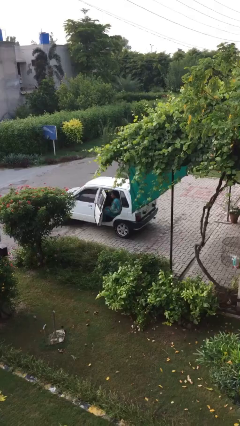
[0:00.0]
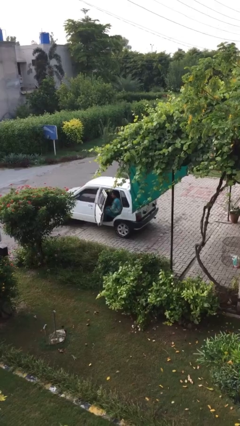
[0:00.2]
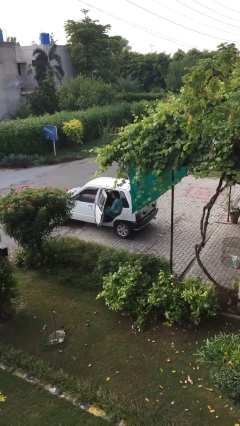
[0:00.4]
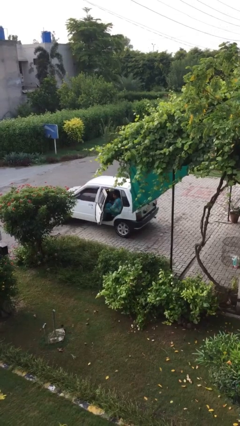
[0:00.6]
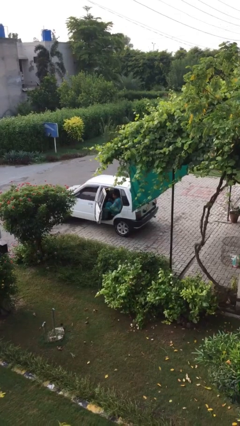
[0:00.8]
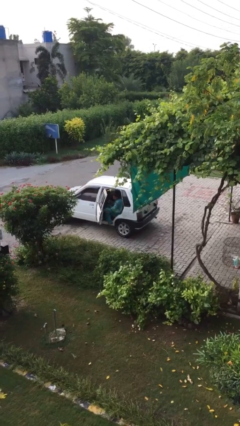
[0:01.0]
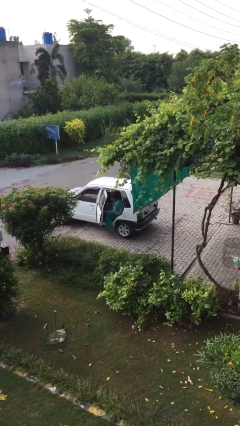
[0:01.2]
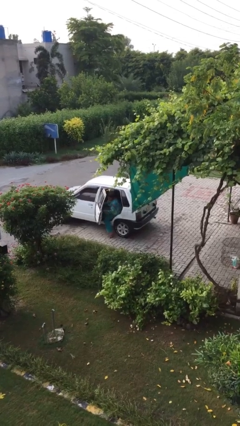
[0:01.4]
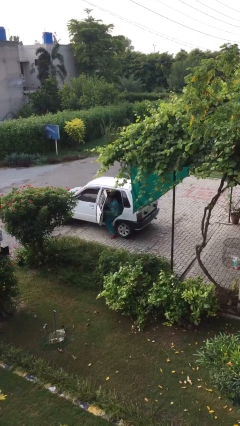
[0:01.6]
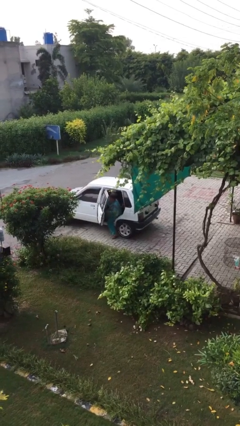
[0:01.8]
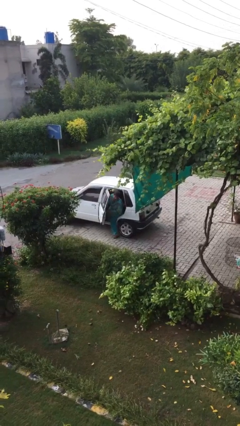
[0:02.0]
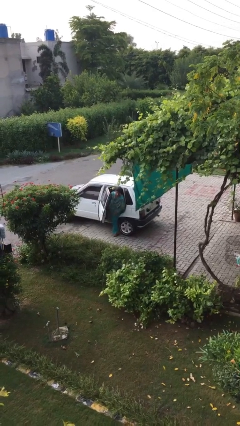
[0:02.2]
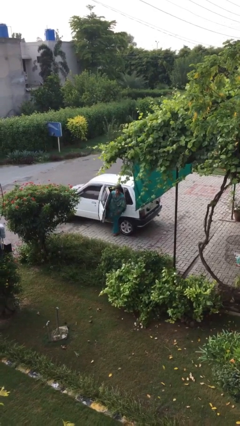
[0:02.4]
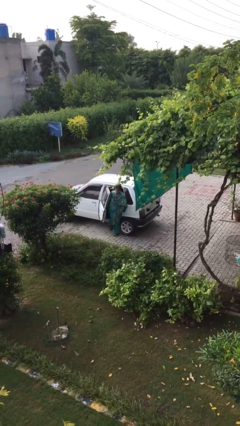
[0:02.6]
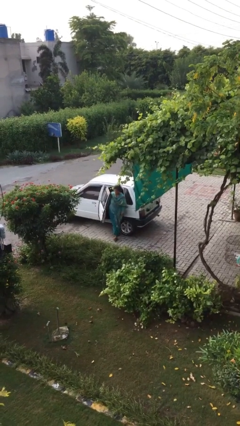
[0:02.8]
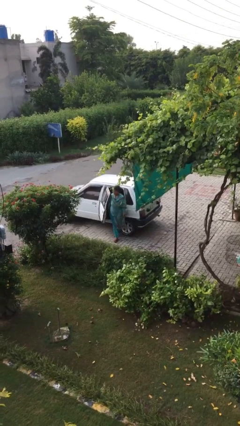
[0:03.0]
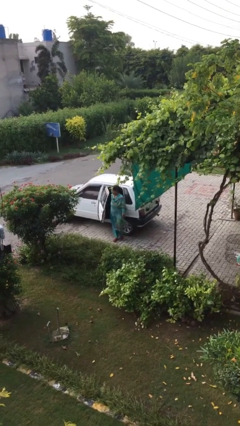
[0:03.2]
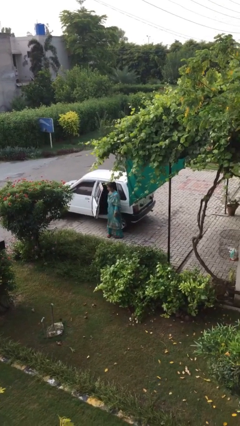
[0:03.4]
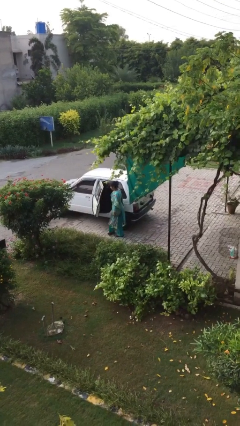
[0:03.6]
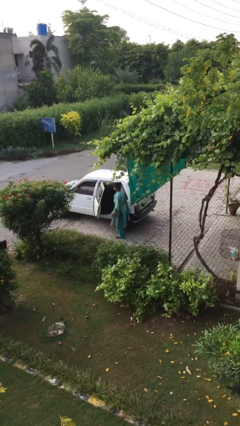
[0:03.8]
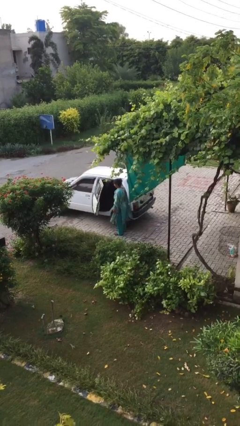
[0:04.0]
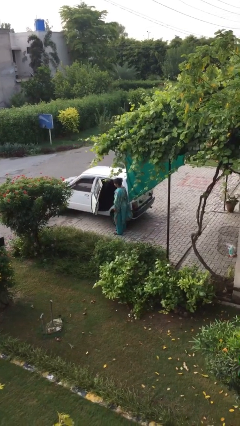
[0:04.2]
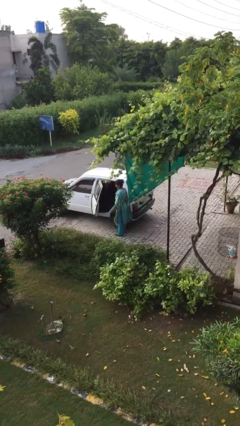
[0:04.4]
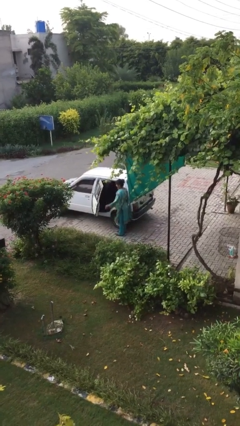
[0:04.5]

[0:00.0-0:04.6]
person exits car

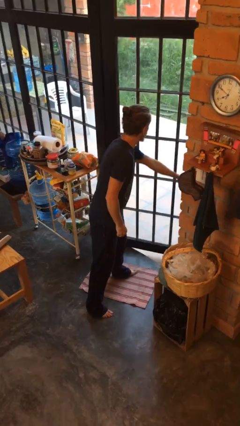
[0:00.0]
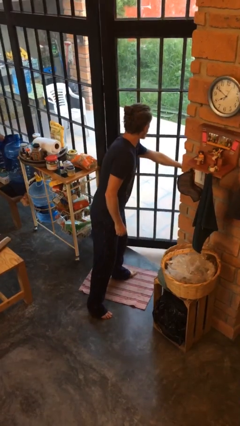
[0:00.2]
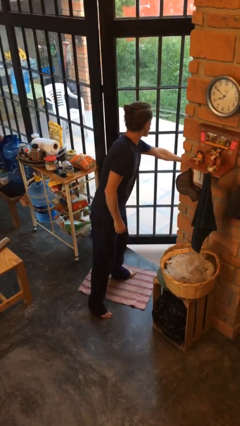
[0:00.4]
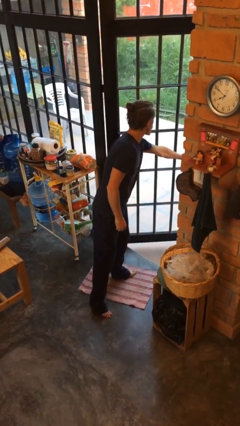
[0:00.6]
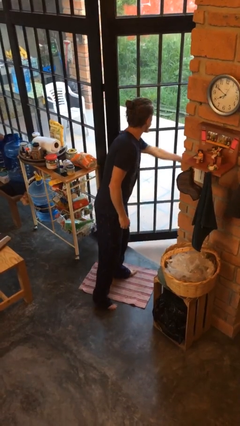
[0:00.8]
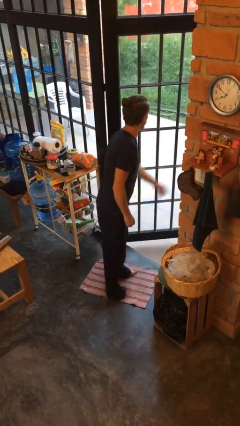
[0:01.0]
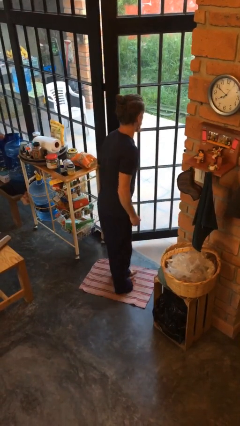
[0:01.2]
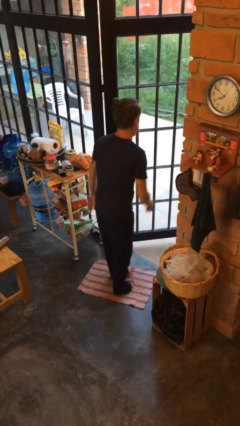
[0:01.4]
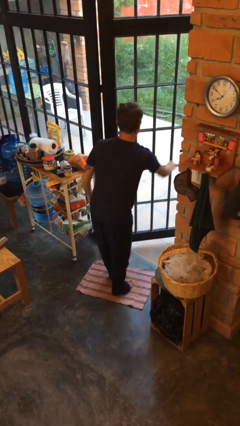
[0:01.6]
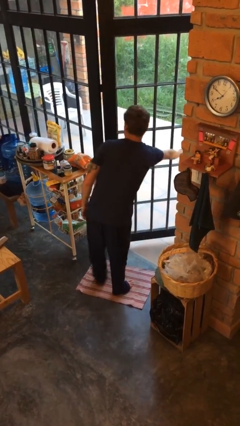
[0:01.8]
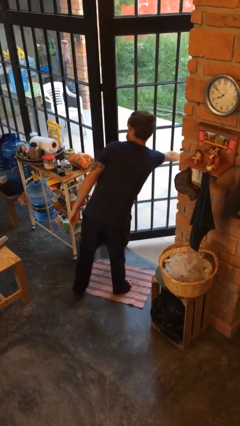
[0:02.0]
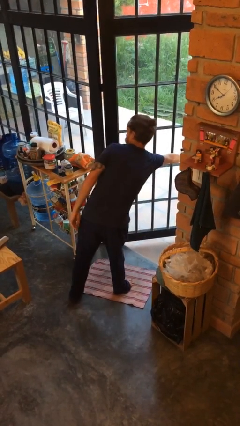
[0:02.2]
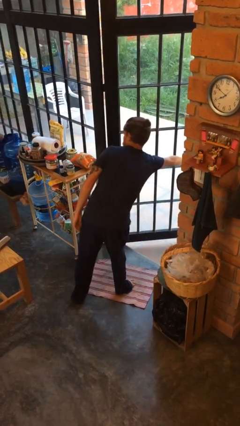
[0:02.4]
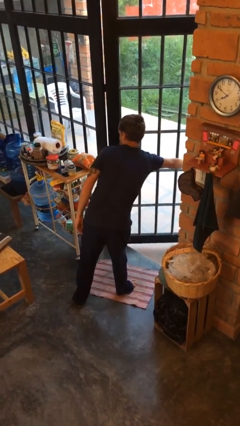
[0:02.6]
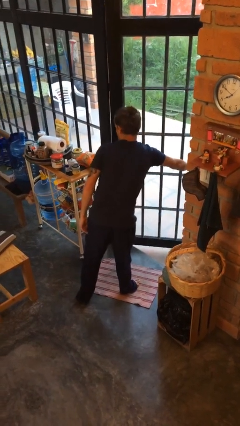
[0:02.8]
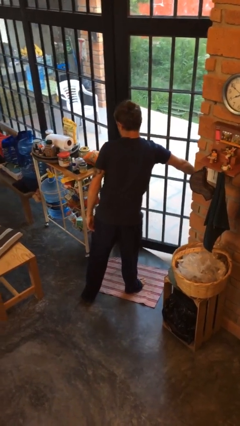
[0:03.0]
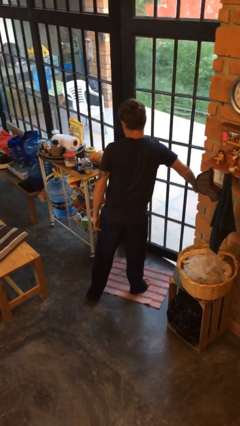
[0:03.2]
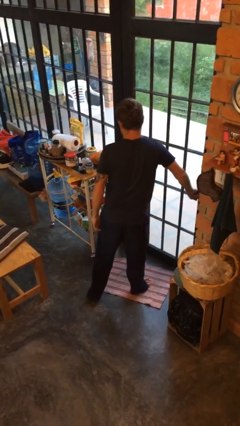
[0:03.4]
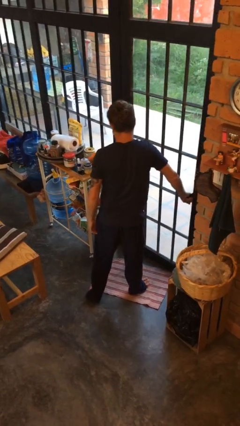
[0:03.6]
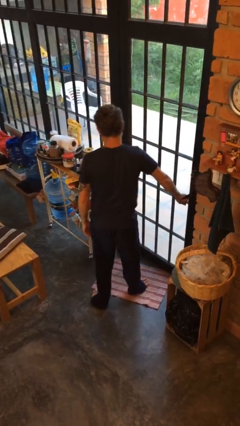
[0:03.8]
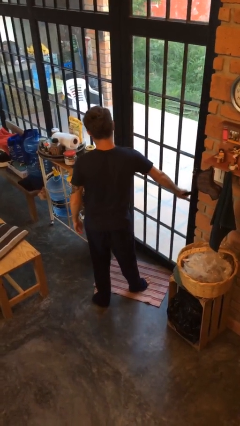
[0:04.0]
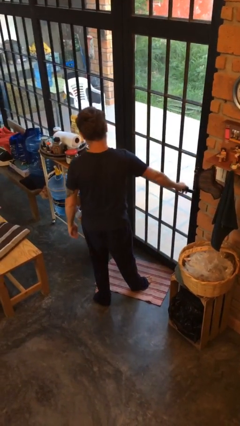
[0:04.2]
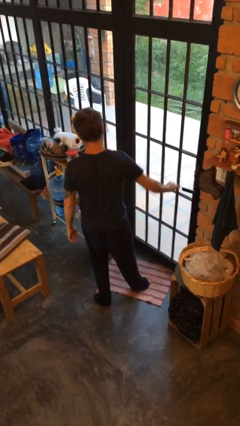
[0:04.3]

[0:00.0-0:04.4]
person closes facility door

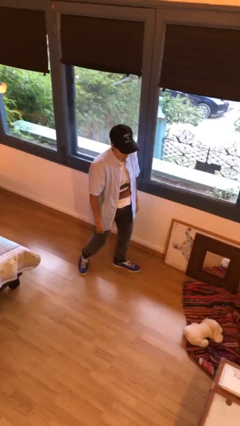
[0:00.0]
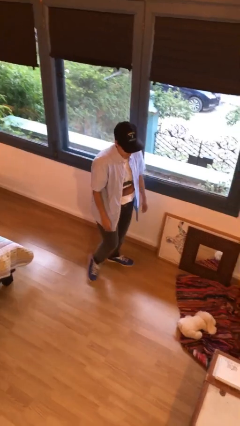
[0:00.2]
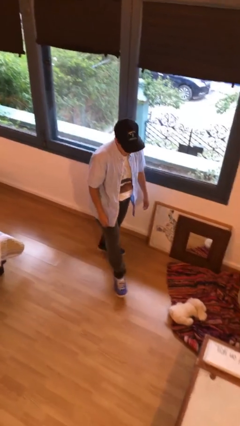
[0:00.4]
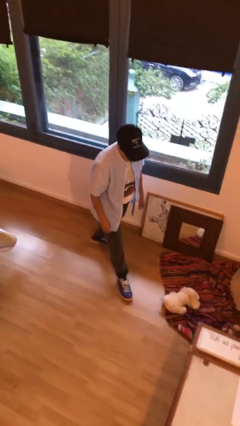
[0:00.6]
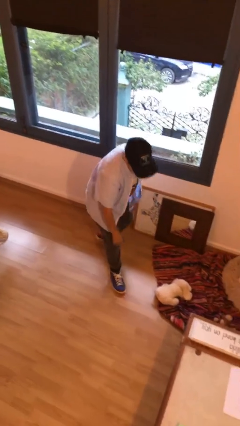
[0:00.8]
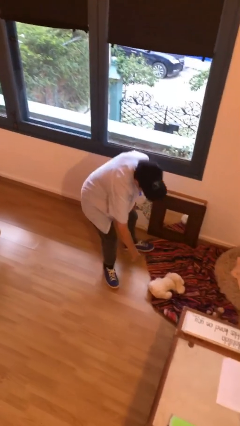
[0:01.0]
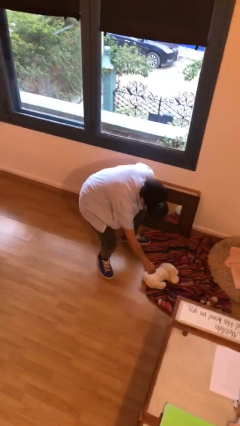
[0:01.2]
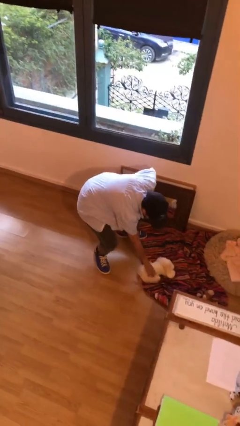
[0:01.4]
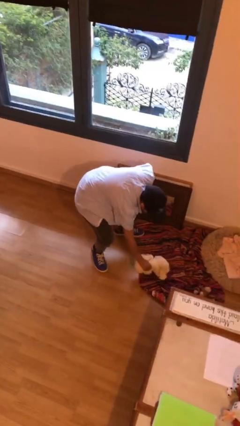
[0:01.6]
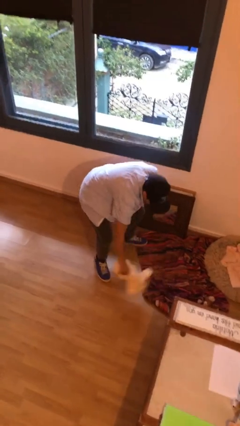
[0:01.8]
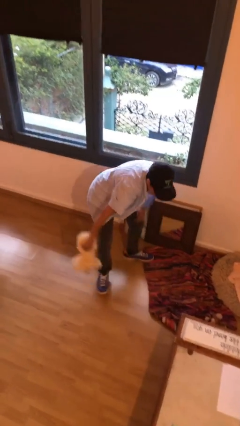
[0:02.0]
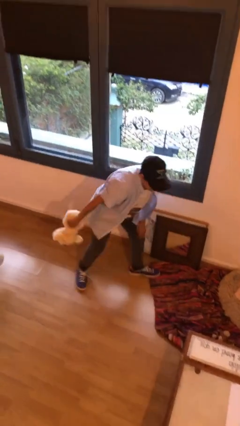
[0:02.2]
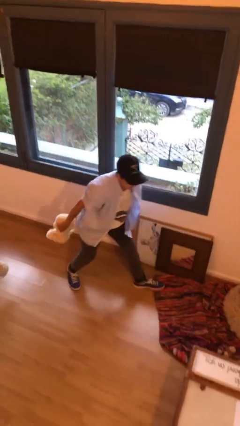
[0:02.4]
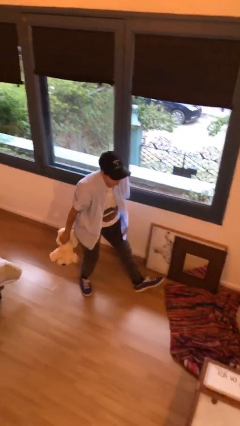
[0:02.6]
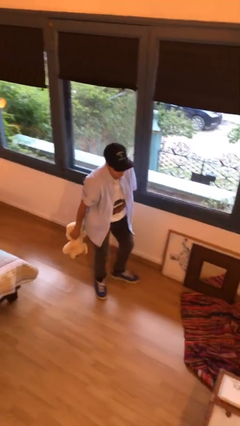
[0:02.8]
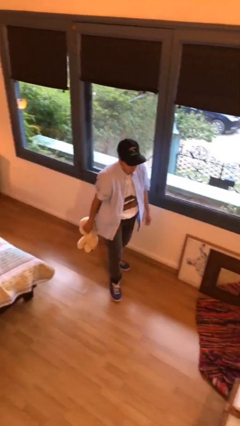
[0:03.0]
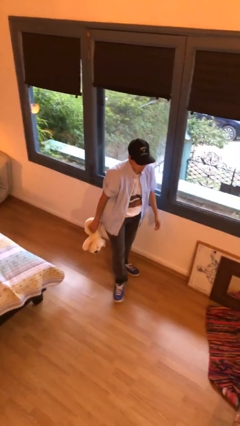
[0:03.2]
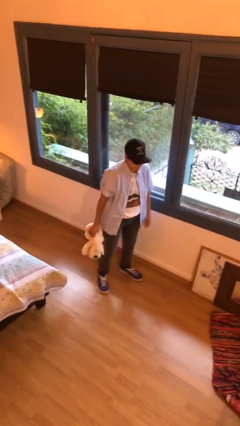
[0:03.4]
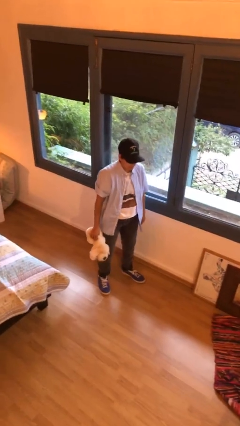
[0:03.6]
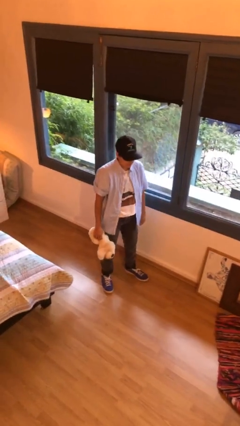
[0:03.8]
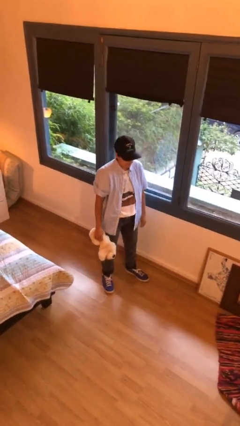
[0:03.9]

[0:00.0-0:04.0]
person picks up object from floor

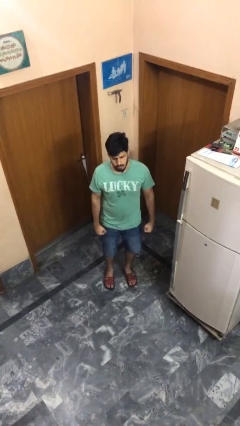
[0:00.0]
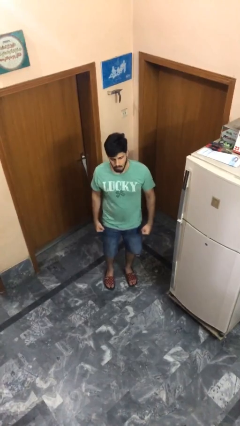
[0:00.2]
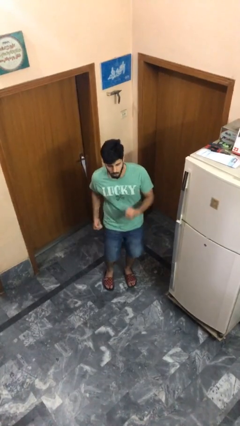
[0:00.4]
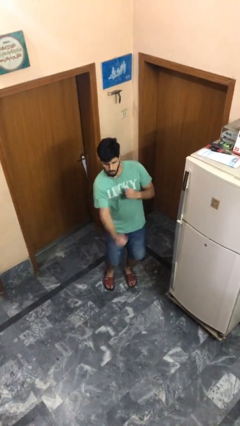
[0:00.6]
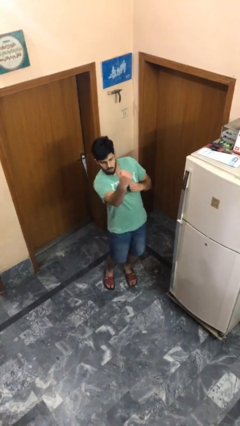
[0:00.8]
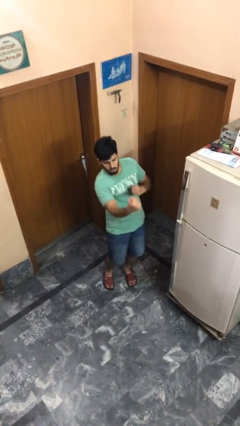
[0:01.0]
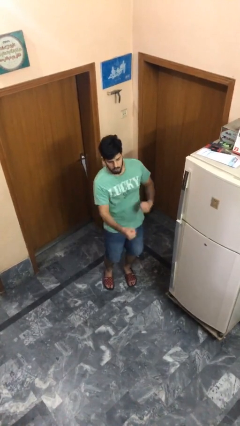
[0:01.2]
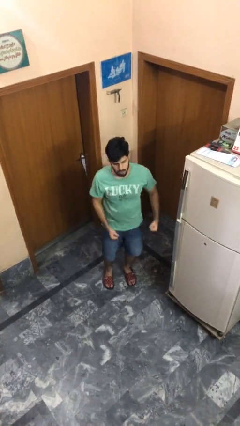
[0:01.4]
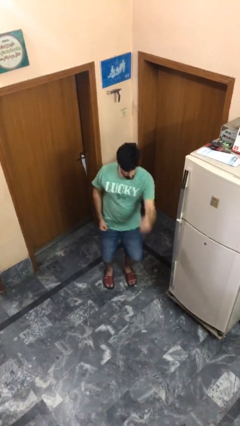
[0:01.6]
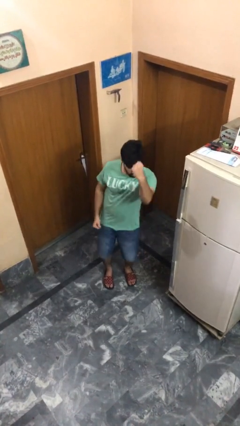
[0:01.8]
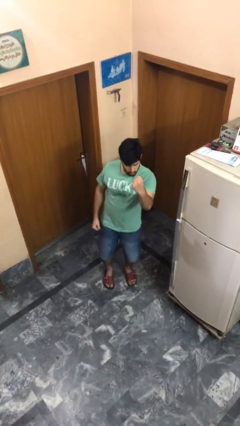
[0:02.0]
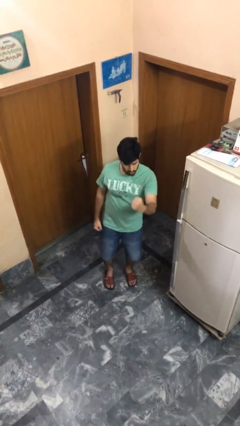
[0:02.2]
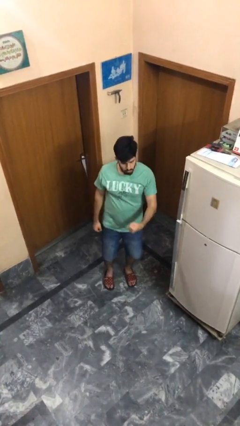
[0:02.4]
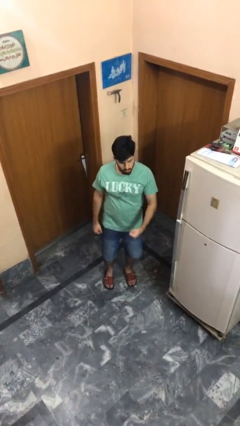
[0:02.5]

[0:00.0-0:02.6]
person punches

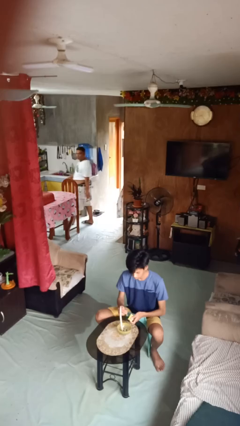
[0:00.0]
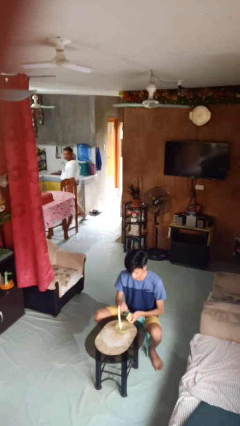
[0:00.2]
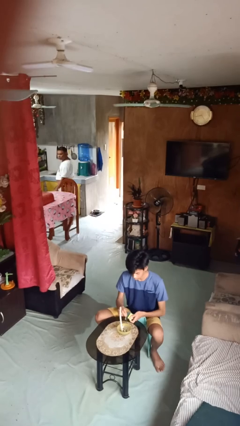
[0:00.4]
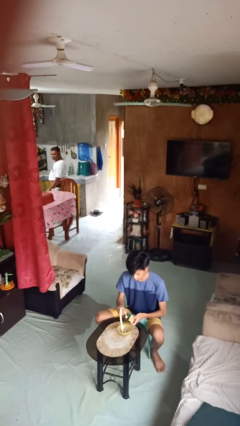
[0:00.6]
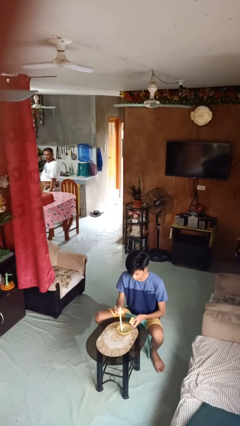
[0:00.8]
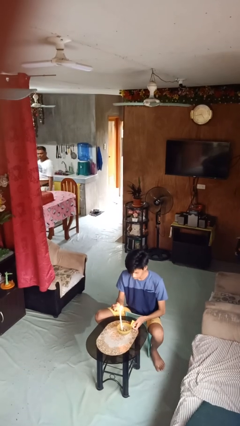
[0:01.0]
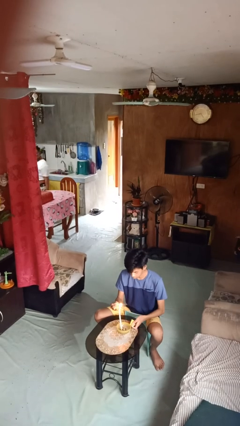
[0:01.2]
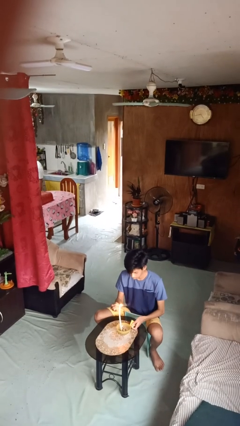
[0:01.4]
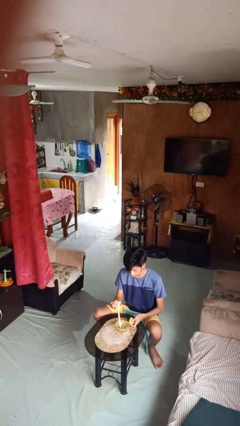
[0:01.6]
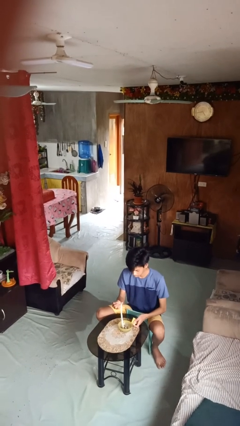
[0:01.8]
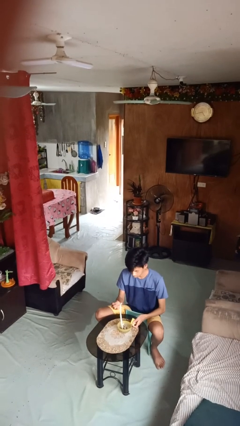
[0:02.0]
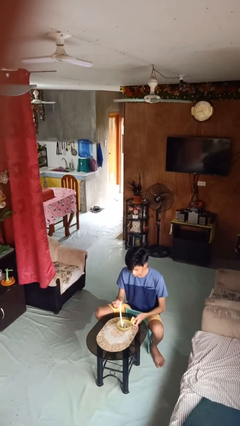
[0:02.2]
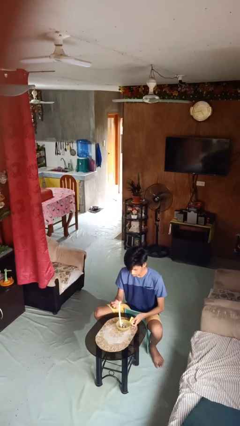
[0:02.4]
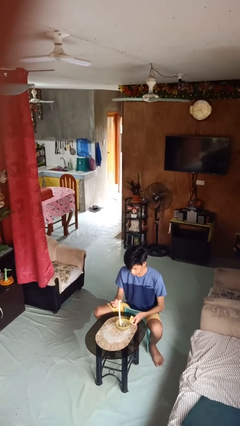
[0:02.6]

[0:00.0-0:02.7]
person lights candle
